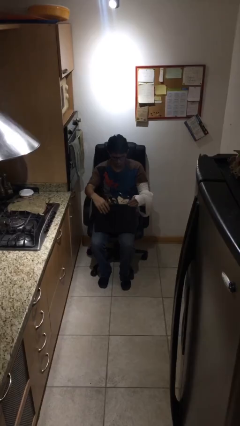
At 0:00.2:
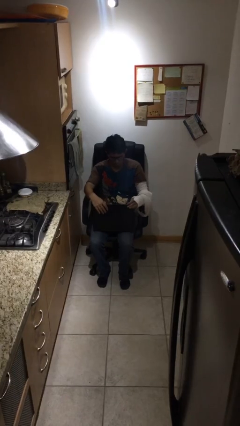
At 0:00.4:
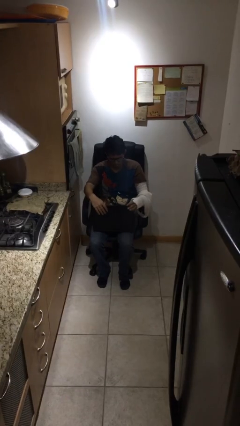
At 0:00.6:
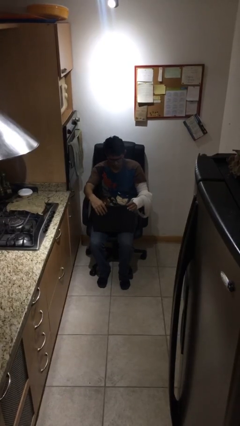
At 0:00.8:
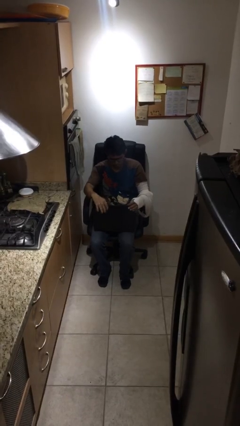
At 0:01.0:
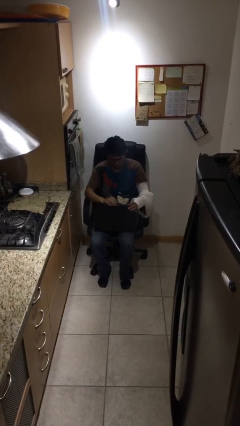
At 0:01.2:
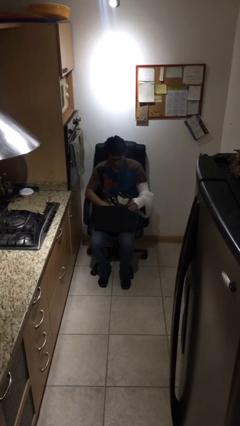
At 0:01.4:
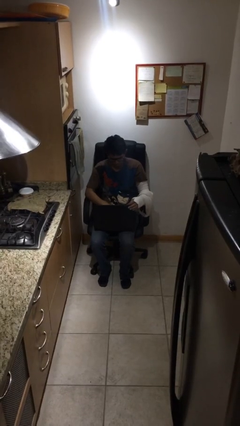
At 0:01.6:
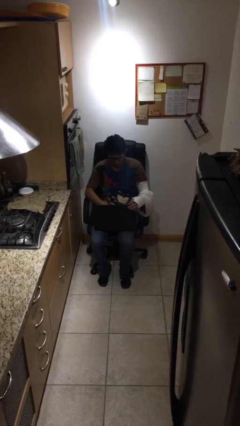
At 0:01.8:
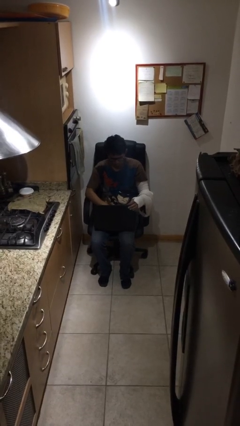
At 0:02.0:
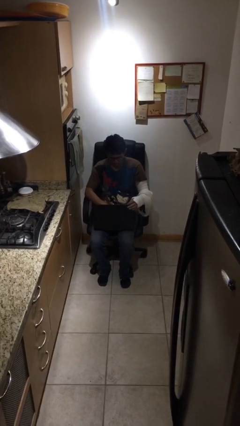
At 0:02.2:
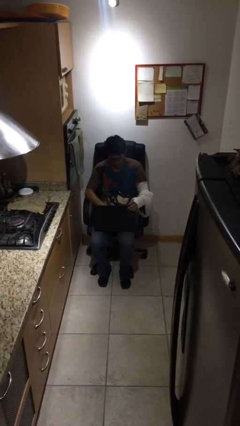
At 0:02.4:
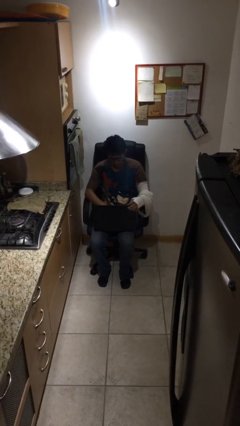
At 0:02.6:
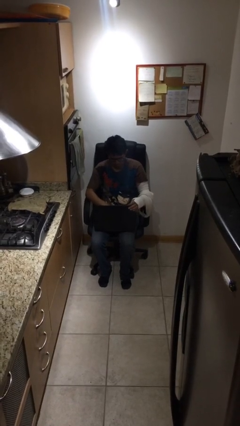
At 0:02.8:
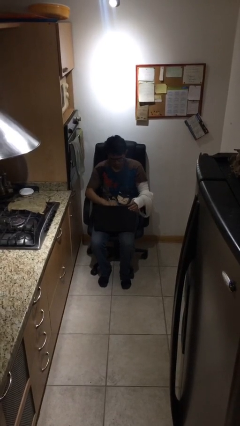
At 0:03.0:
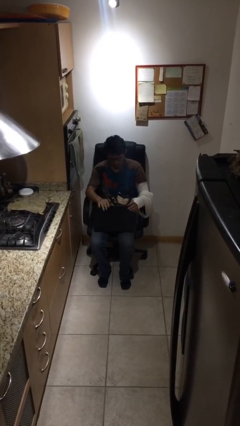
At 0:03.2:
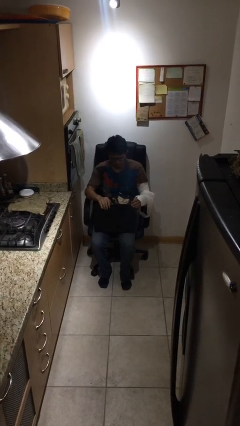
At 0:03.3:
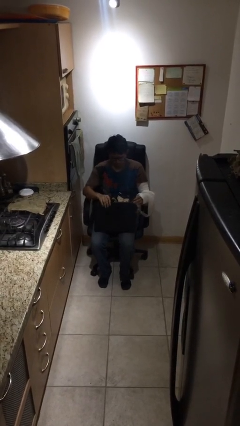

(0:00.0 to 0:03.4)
person interacts with laptop

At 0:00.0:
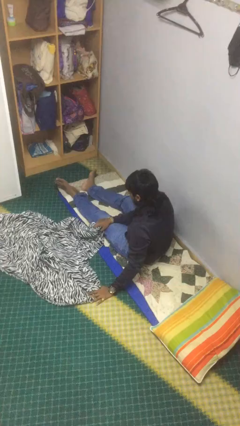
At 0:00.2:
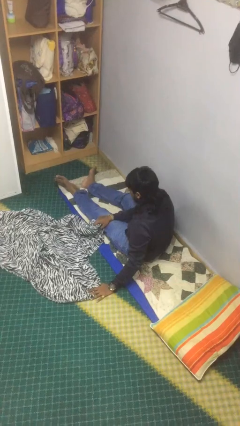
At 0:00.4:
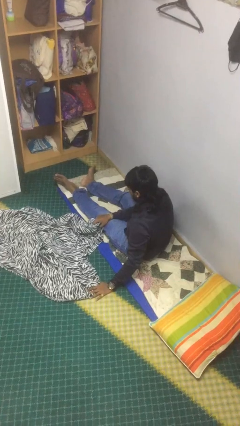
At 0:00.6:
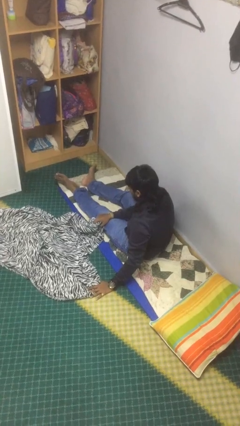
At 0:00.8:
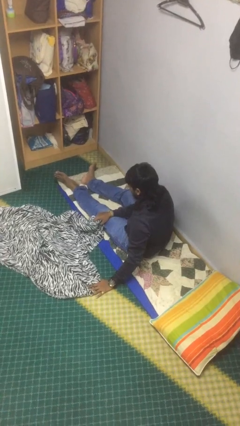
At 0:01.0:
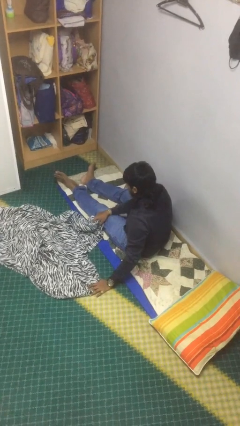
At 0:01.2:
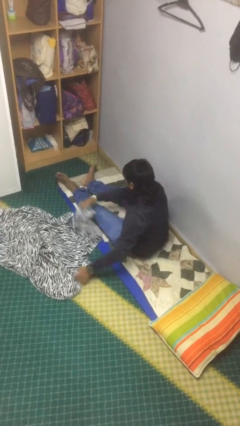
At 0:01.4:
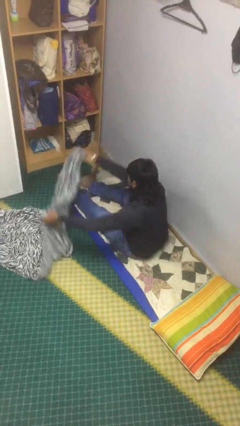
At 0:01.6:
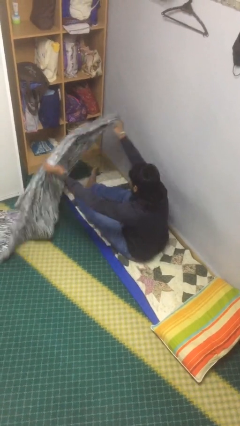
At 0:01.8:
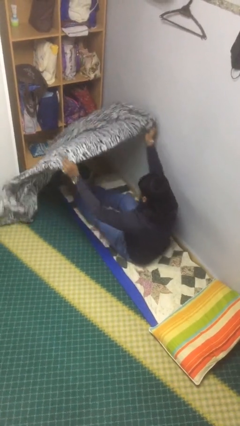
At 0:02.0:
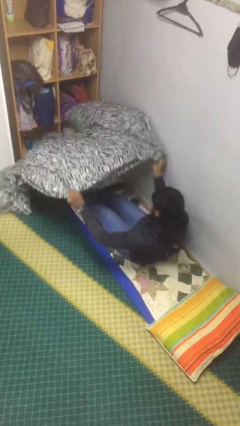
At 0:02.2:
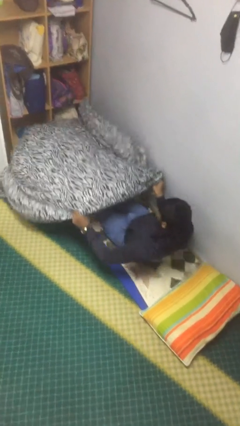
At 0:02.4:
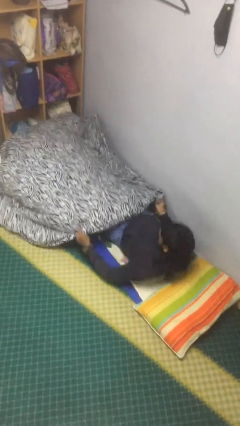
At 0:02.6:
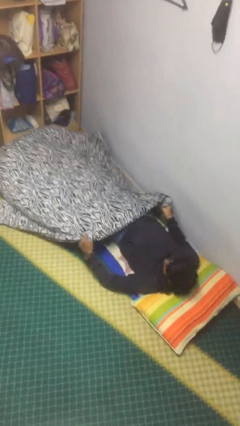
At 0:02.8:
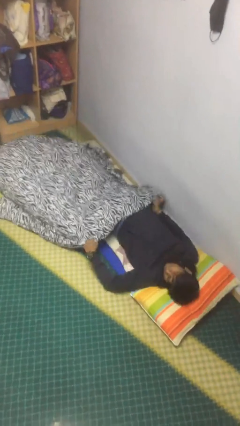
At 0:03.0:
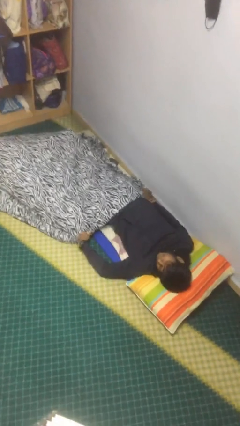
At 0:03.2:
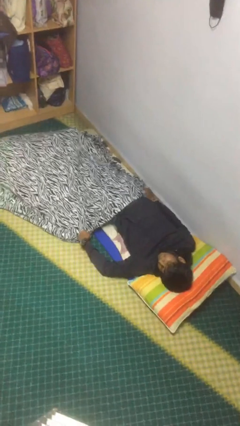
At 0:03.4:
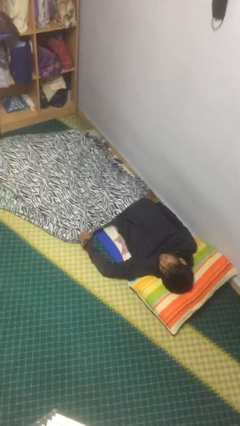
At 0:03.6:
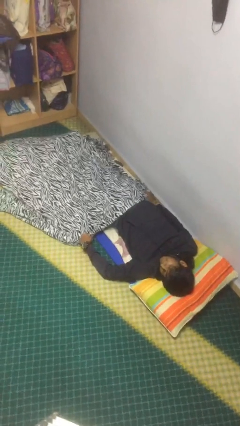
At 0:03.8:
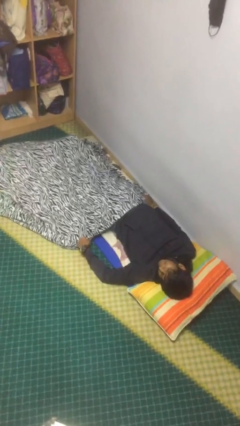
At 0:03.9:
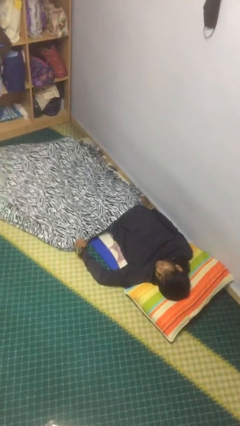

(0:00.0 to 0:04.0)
person covers with blanket

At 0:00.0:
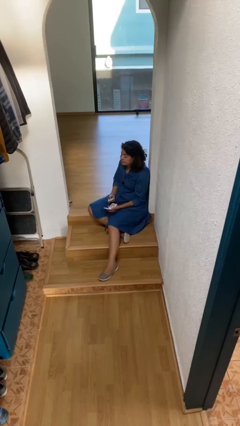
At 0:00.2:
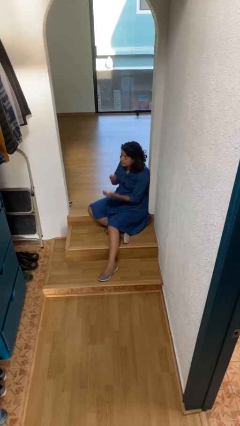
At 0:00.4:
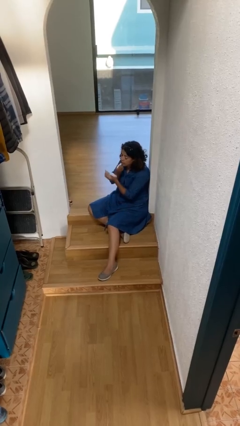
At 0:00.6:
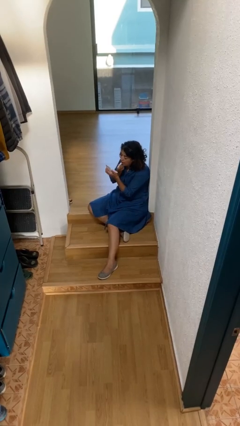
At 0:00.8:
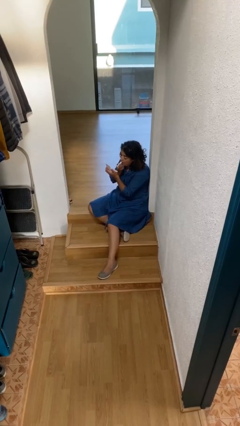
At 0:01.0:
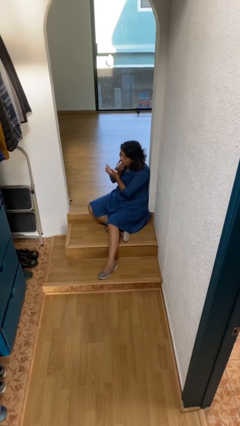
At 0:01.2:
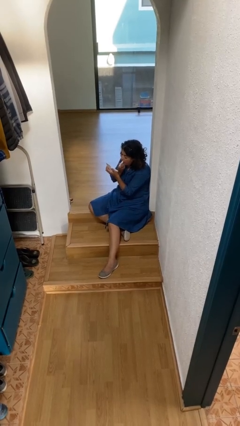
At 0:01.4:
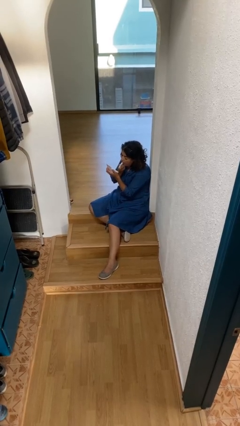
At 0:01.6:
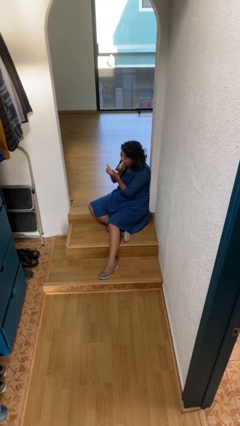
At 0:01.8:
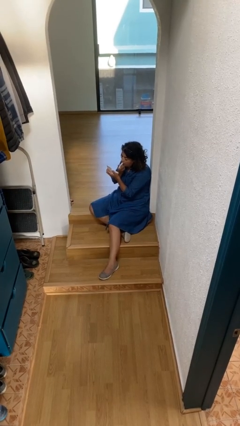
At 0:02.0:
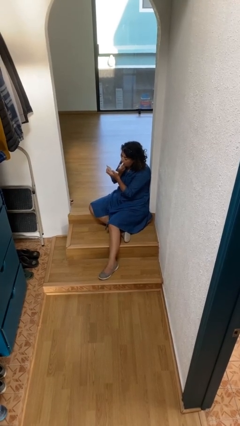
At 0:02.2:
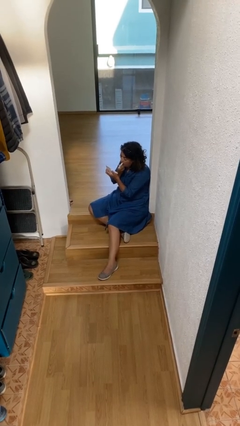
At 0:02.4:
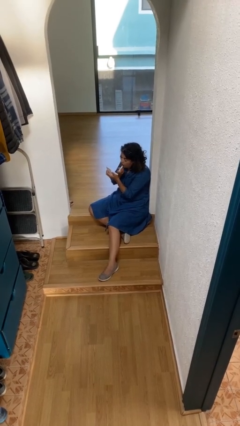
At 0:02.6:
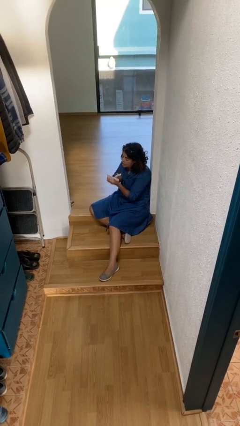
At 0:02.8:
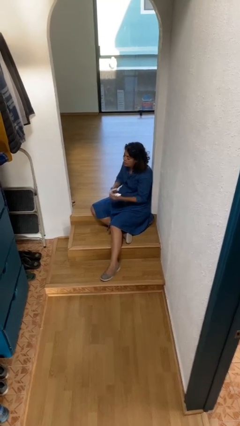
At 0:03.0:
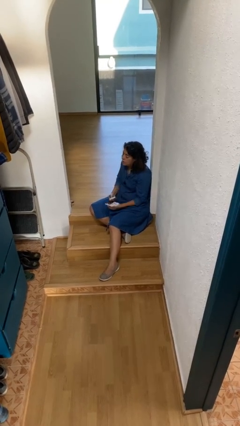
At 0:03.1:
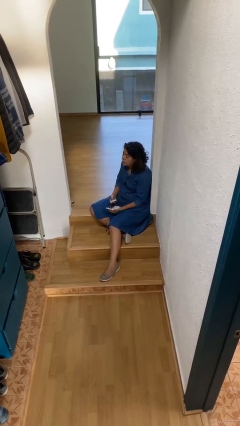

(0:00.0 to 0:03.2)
person applies lip makeup

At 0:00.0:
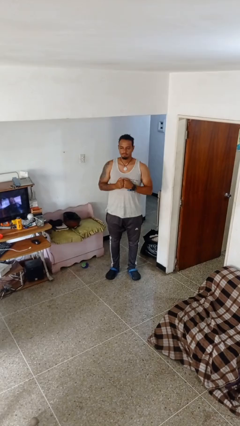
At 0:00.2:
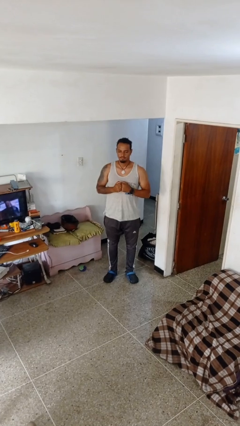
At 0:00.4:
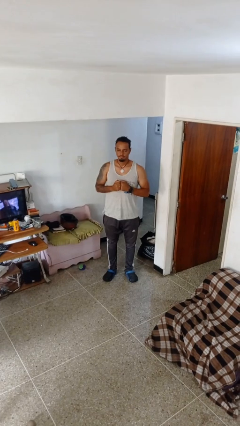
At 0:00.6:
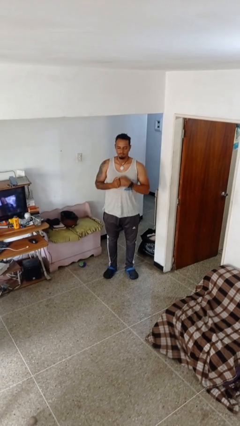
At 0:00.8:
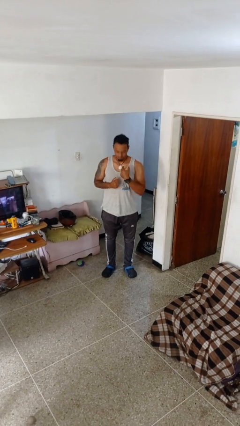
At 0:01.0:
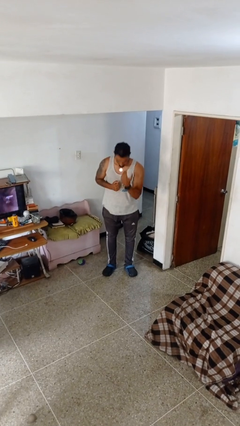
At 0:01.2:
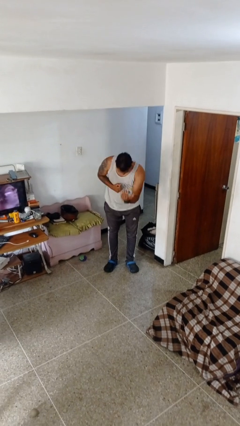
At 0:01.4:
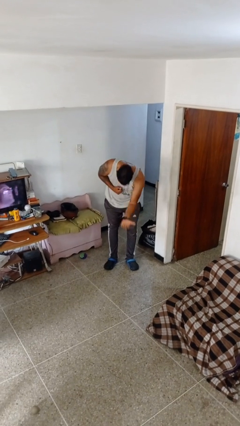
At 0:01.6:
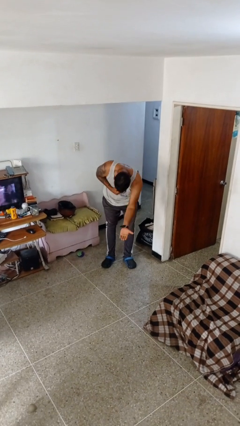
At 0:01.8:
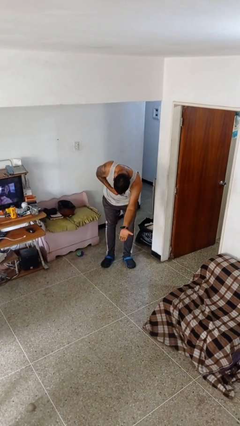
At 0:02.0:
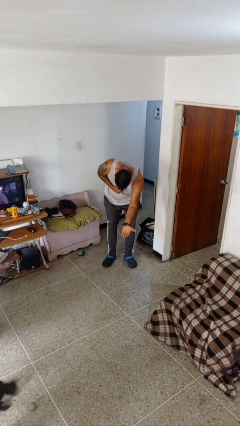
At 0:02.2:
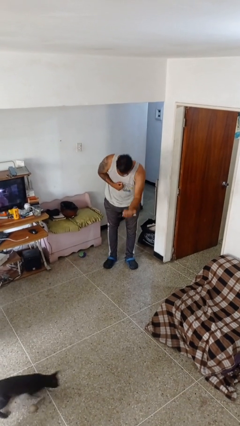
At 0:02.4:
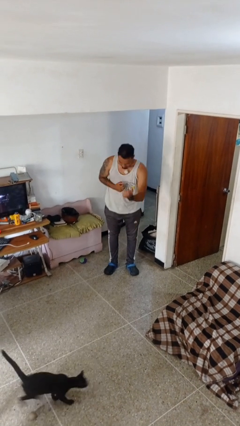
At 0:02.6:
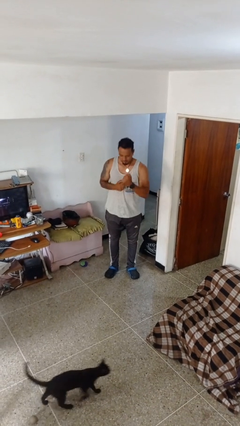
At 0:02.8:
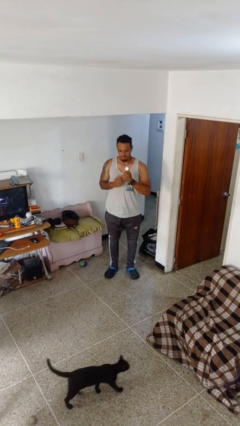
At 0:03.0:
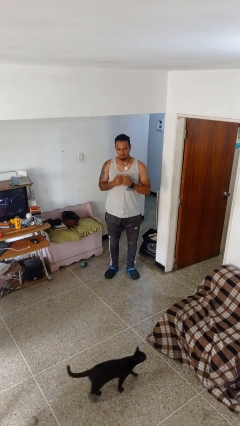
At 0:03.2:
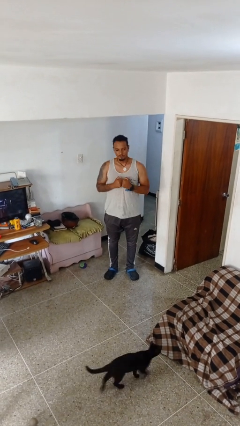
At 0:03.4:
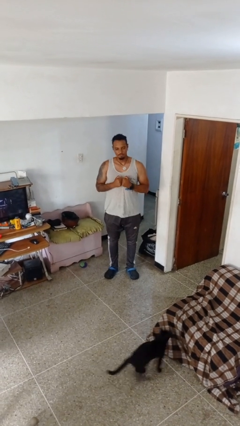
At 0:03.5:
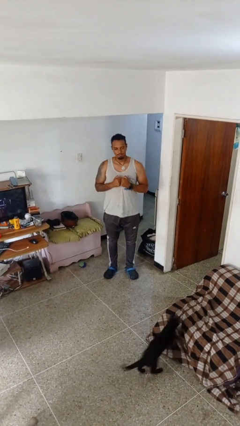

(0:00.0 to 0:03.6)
person bows

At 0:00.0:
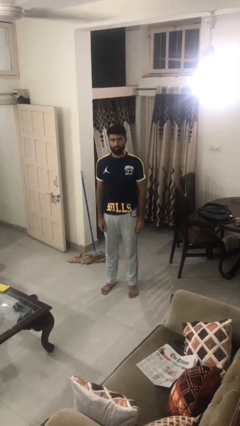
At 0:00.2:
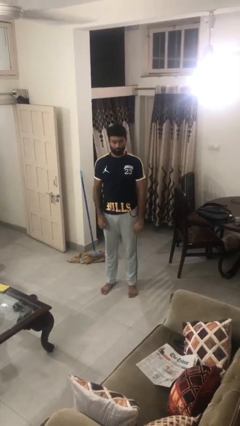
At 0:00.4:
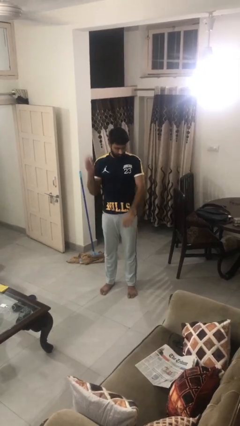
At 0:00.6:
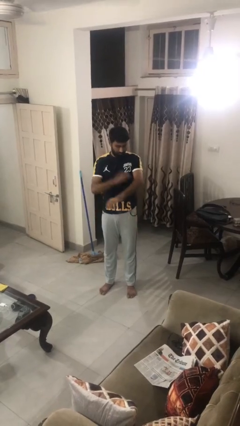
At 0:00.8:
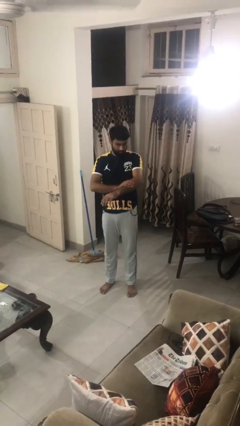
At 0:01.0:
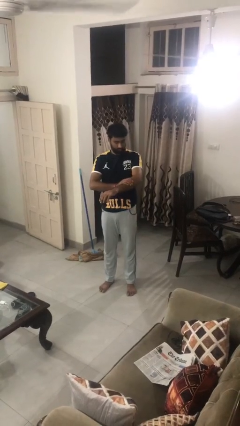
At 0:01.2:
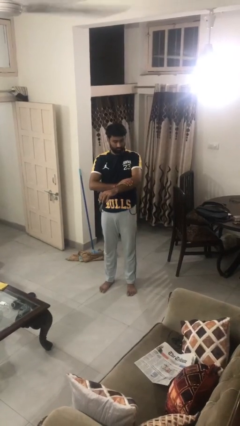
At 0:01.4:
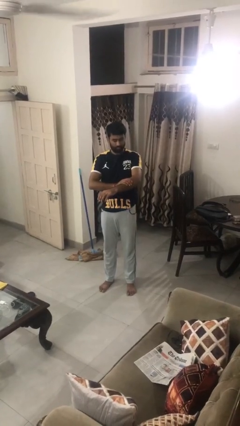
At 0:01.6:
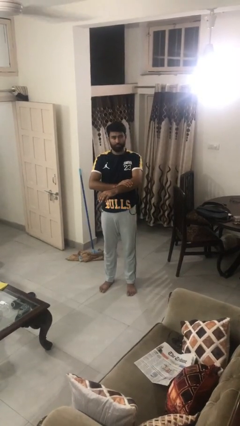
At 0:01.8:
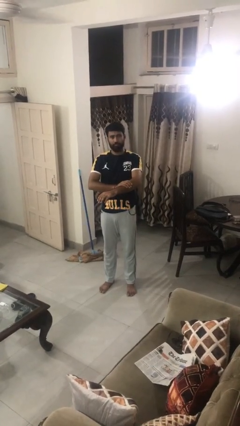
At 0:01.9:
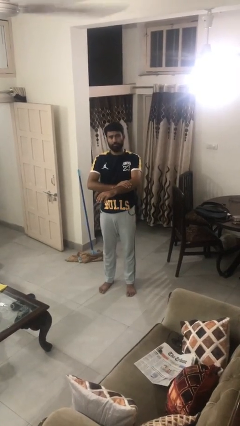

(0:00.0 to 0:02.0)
person swats bug

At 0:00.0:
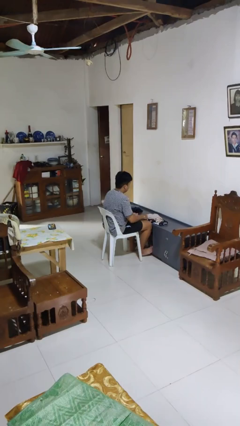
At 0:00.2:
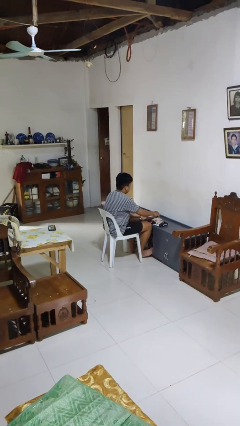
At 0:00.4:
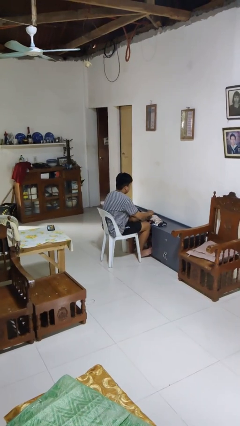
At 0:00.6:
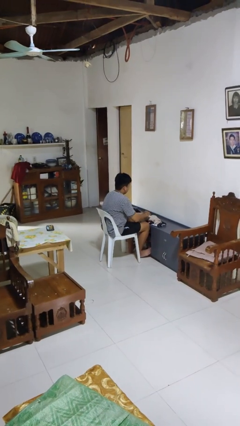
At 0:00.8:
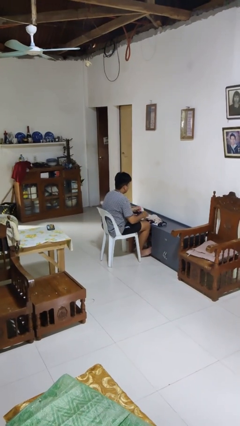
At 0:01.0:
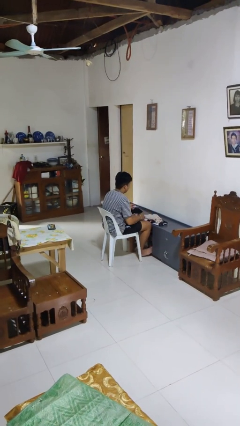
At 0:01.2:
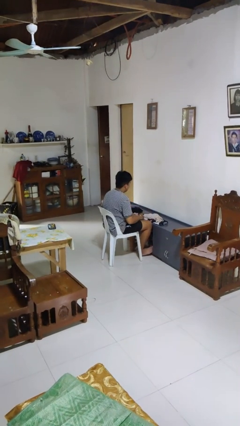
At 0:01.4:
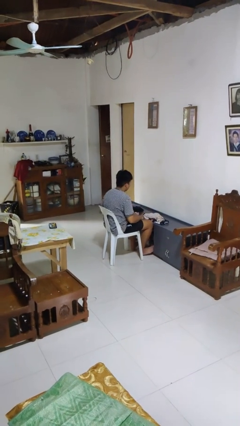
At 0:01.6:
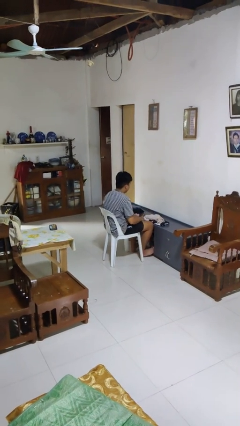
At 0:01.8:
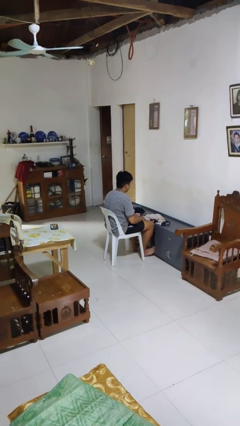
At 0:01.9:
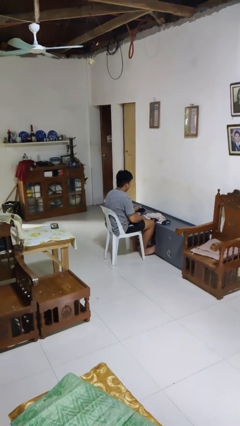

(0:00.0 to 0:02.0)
person folds socks
